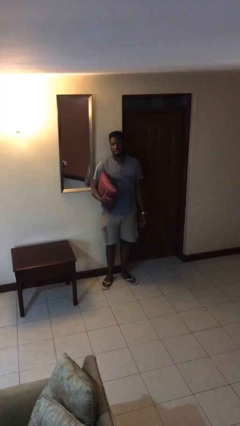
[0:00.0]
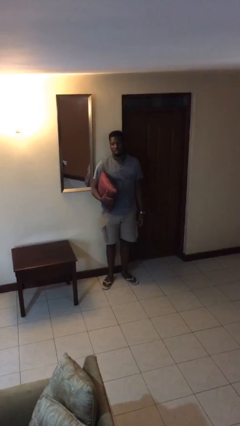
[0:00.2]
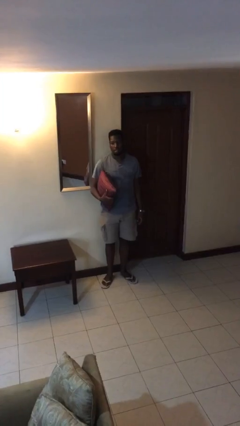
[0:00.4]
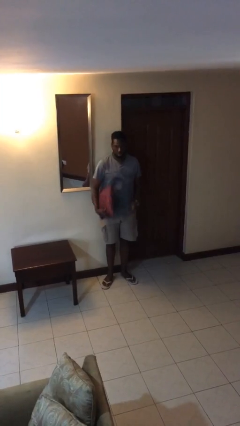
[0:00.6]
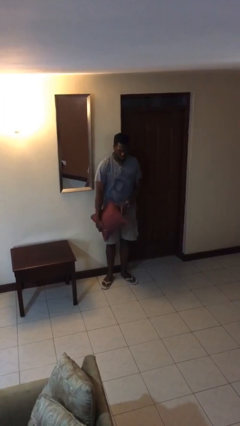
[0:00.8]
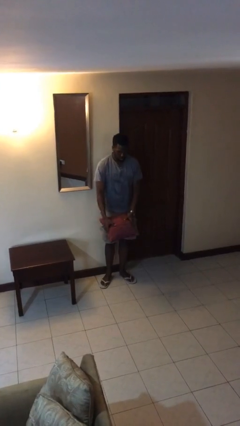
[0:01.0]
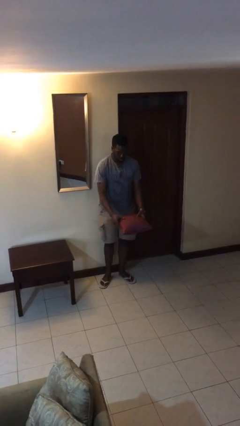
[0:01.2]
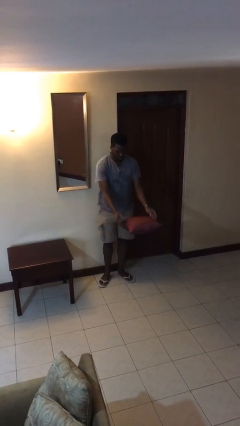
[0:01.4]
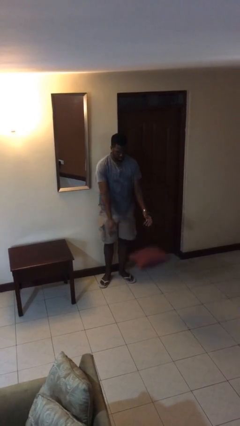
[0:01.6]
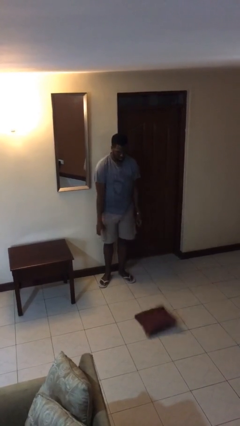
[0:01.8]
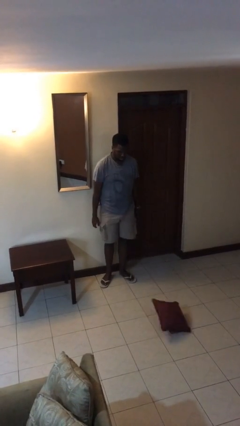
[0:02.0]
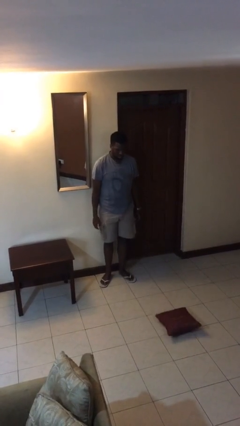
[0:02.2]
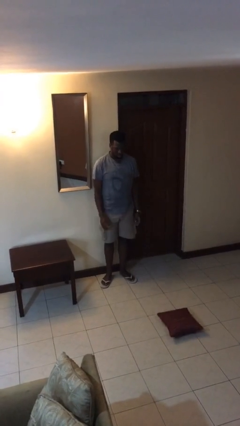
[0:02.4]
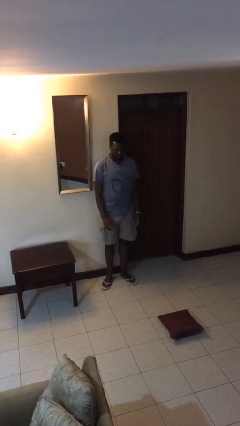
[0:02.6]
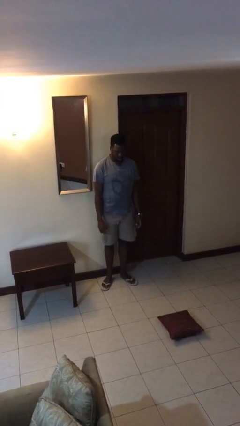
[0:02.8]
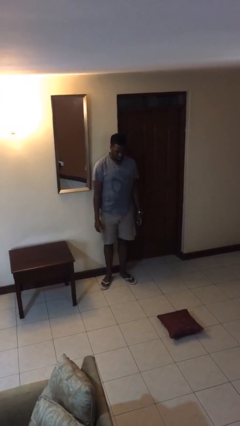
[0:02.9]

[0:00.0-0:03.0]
person throws object to ground

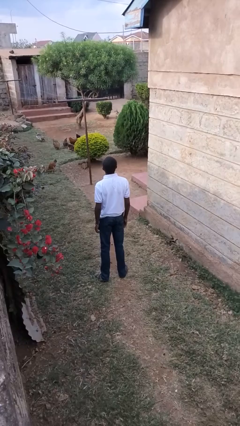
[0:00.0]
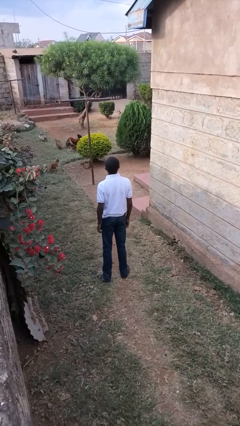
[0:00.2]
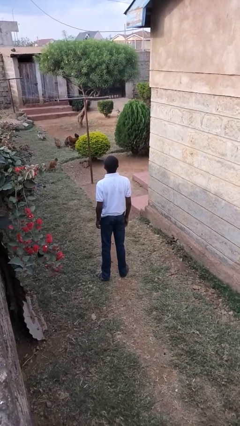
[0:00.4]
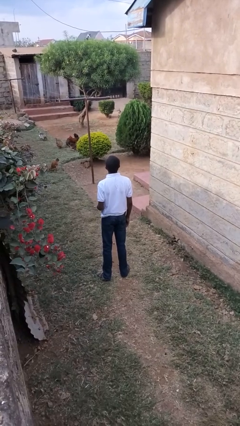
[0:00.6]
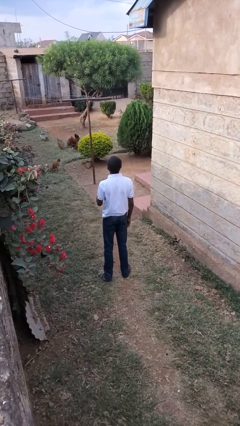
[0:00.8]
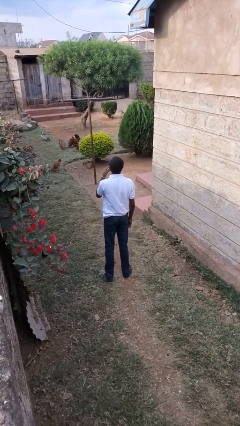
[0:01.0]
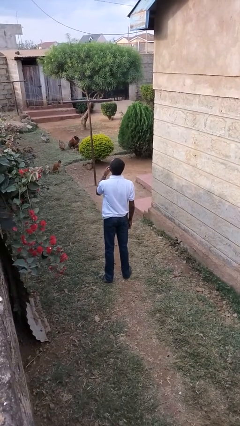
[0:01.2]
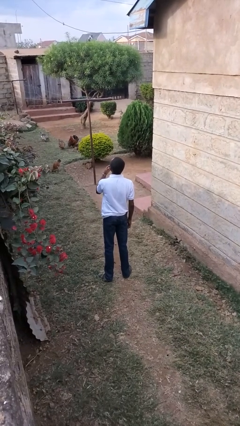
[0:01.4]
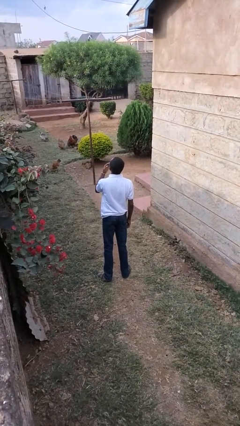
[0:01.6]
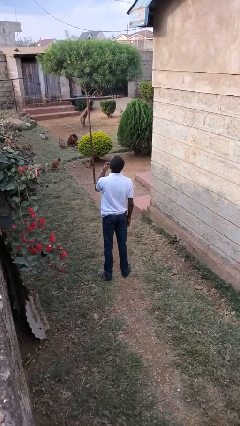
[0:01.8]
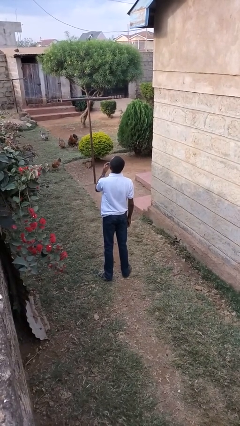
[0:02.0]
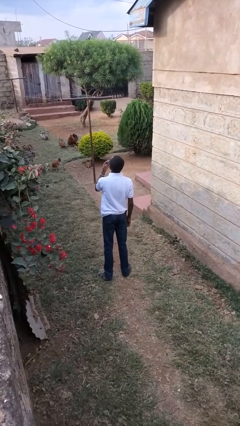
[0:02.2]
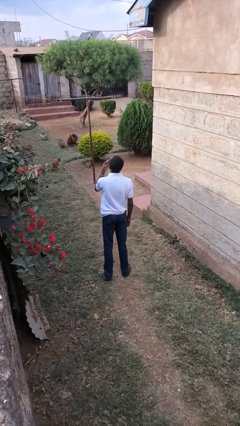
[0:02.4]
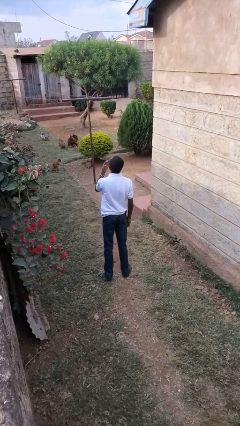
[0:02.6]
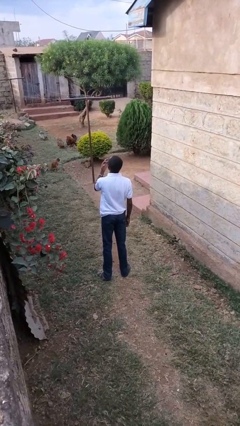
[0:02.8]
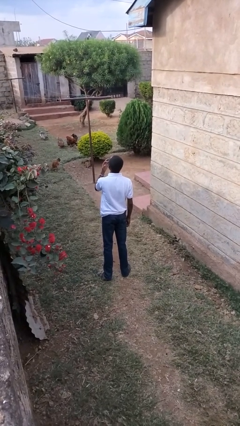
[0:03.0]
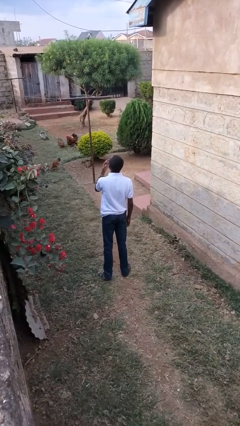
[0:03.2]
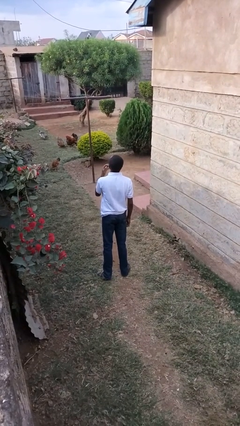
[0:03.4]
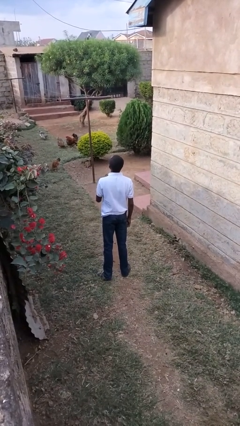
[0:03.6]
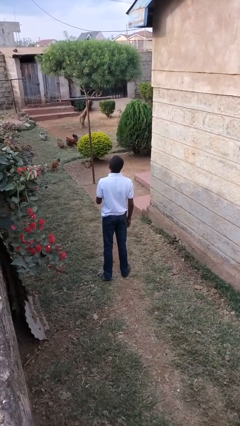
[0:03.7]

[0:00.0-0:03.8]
person licks fingers

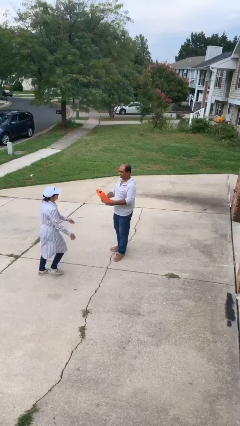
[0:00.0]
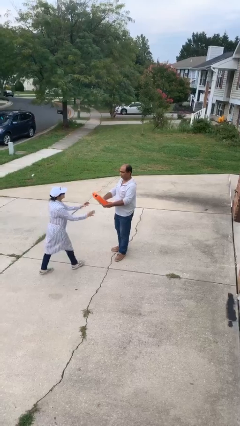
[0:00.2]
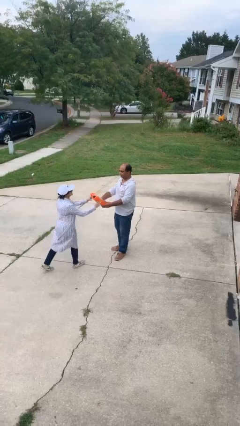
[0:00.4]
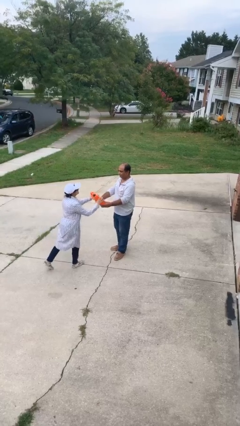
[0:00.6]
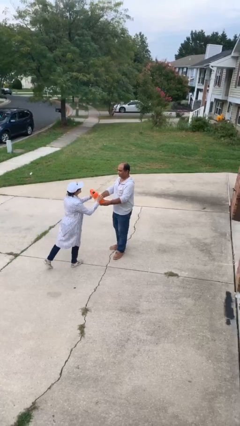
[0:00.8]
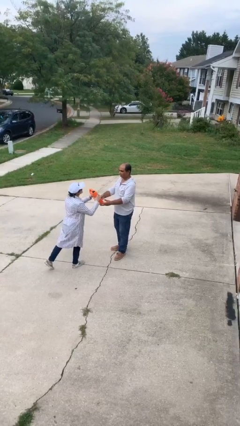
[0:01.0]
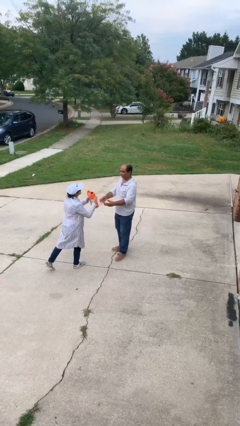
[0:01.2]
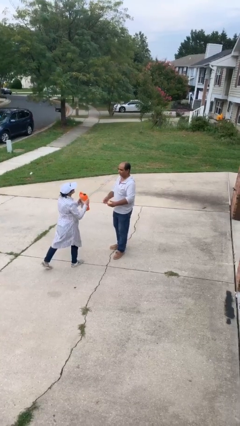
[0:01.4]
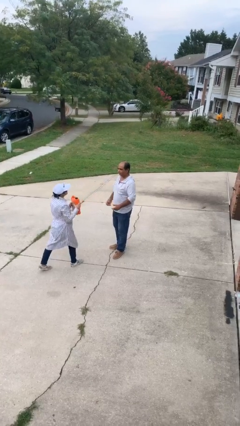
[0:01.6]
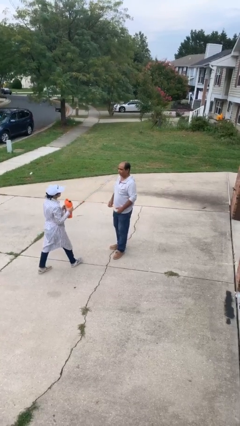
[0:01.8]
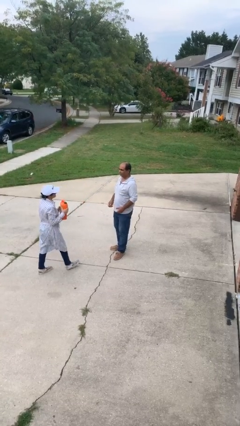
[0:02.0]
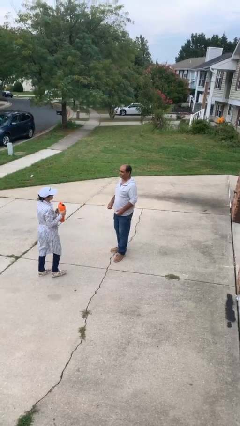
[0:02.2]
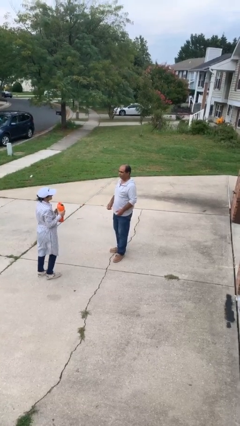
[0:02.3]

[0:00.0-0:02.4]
person transfers object to person

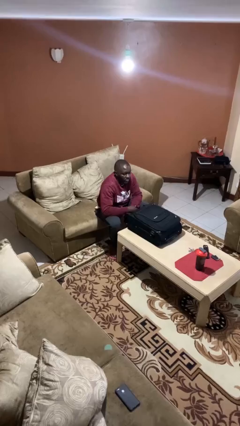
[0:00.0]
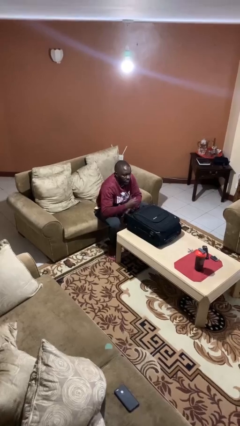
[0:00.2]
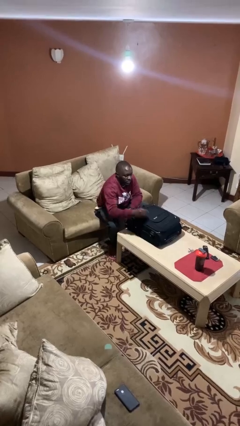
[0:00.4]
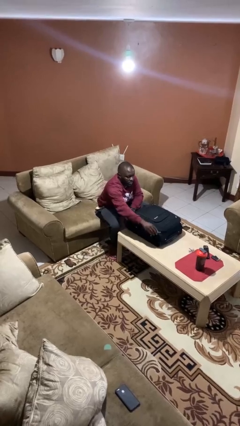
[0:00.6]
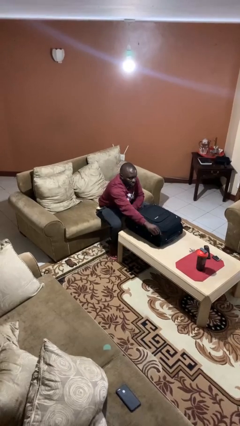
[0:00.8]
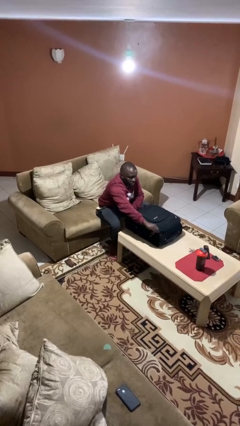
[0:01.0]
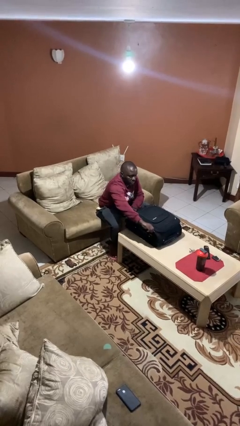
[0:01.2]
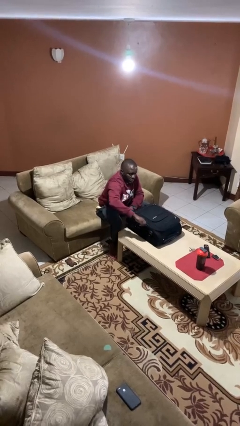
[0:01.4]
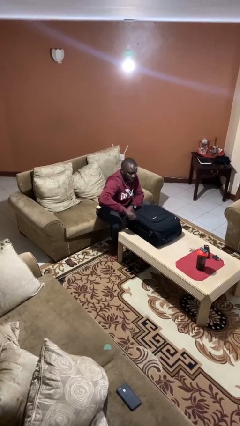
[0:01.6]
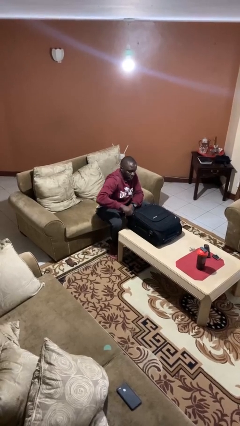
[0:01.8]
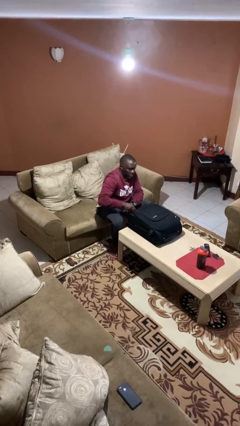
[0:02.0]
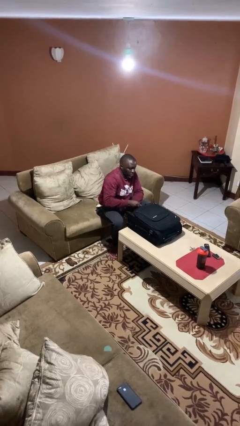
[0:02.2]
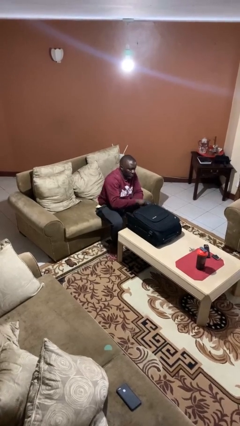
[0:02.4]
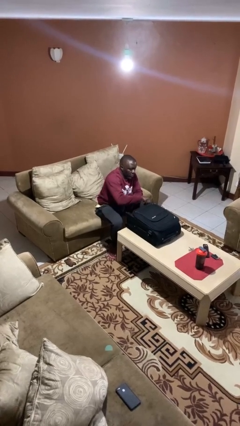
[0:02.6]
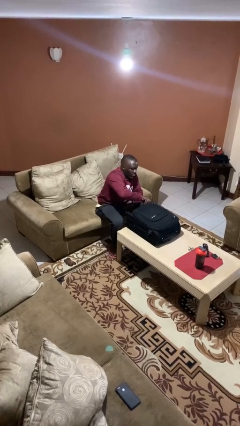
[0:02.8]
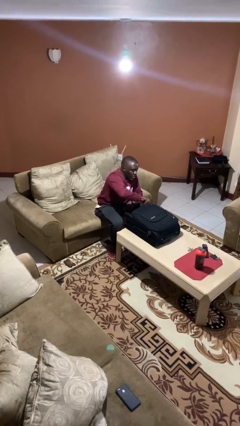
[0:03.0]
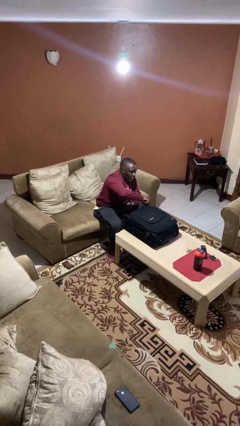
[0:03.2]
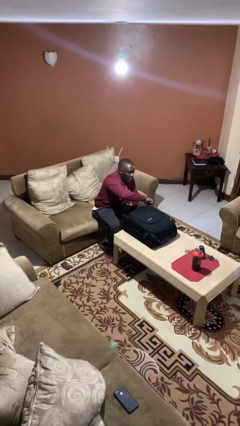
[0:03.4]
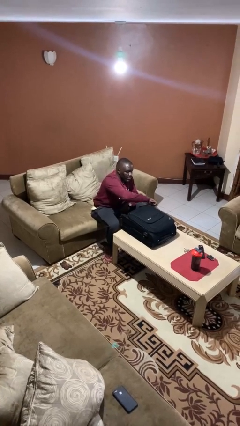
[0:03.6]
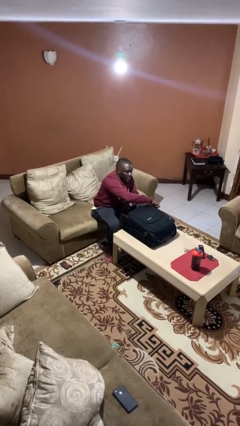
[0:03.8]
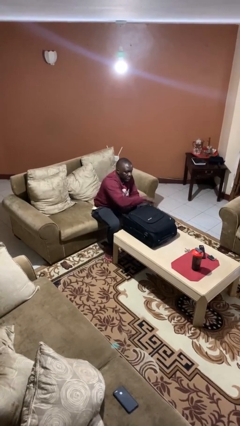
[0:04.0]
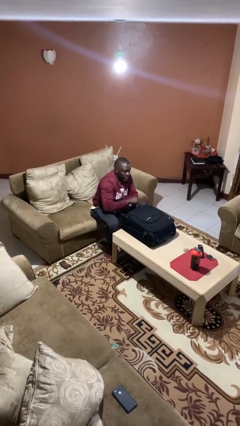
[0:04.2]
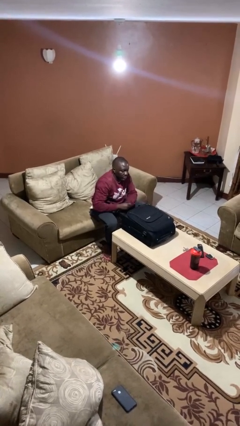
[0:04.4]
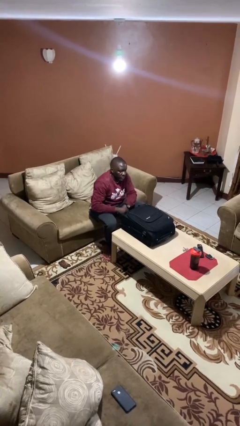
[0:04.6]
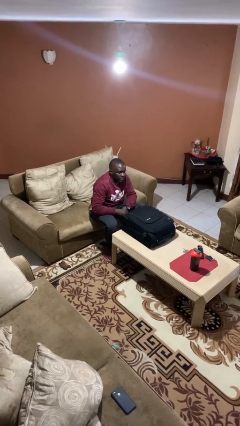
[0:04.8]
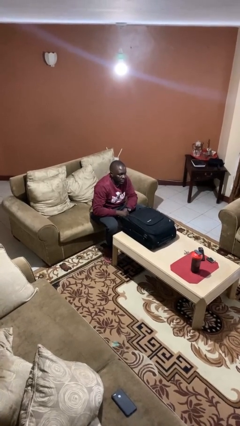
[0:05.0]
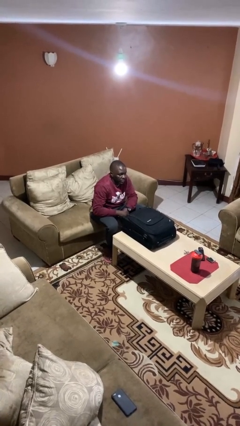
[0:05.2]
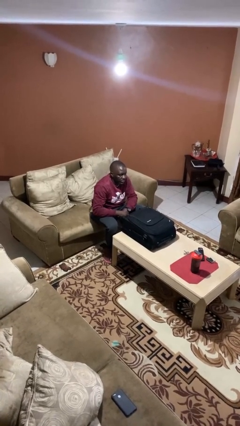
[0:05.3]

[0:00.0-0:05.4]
person opens suitcase

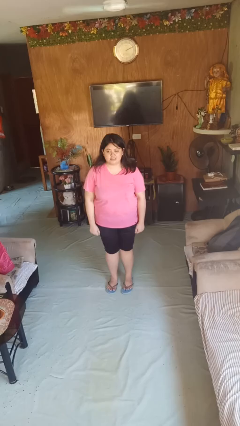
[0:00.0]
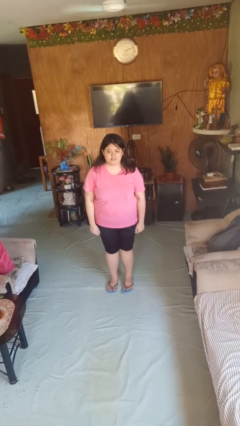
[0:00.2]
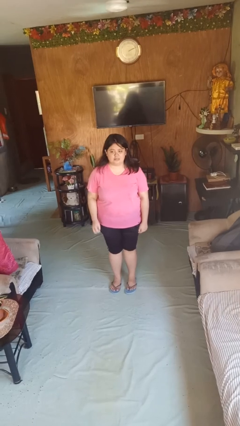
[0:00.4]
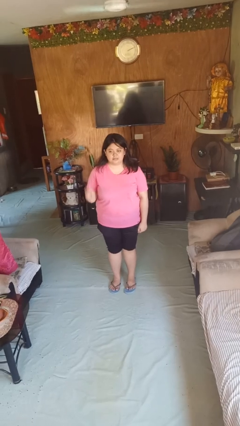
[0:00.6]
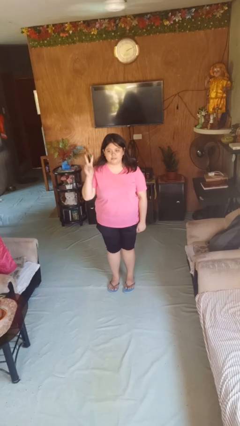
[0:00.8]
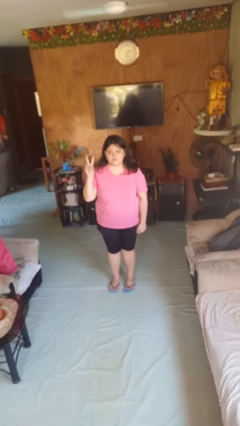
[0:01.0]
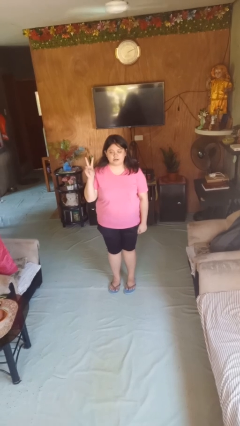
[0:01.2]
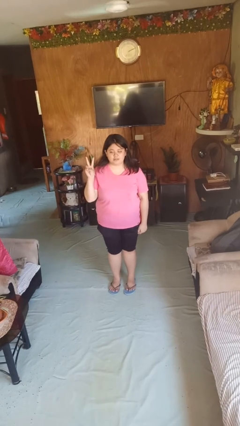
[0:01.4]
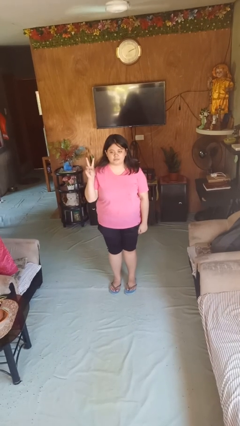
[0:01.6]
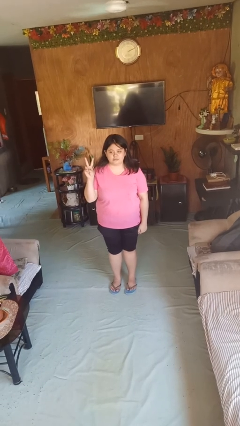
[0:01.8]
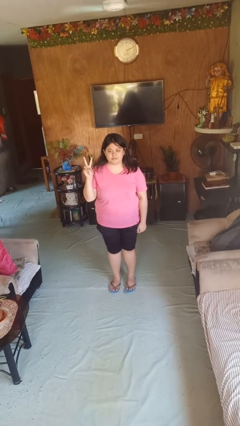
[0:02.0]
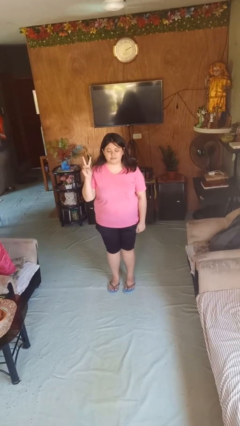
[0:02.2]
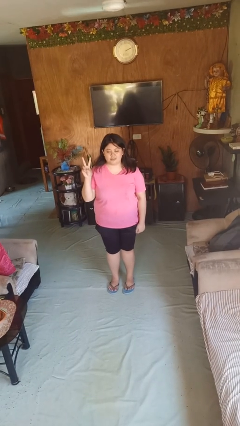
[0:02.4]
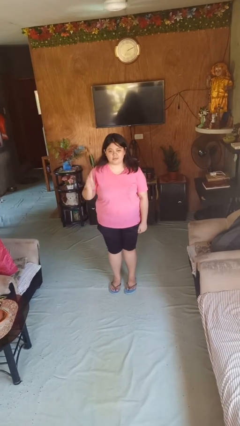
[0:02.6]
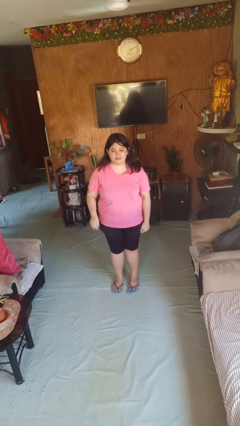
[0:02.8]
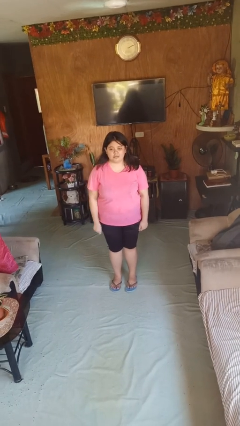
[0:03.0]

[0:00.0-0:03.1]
person gestures peace
